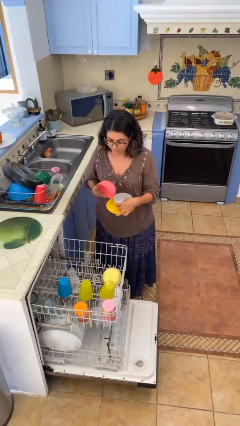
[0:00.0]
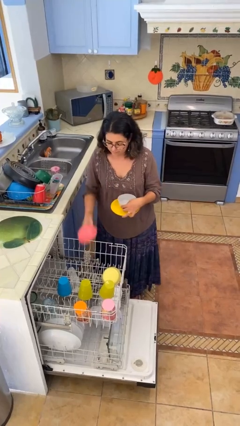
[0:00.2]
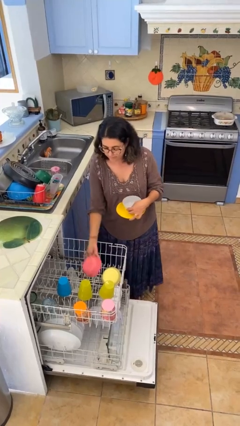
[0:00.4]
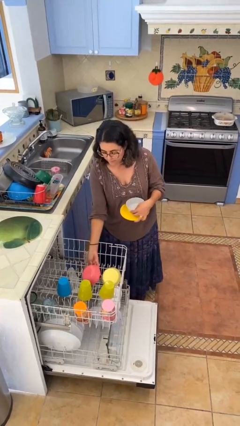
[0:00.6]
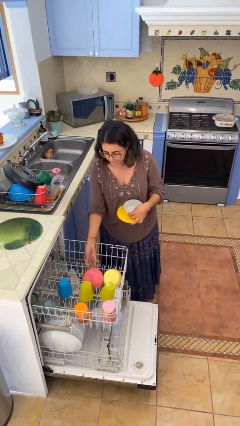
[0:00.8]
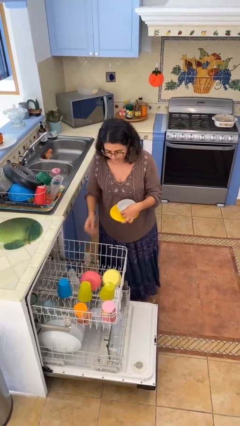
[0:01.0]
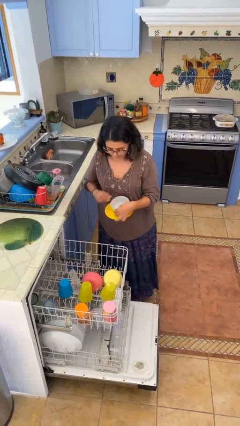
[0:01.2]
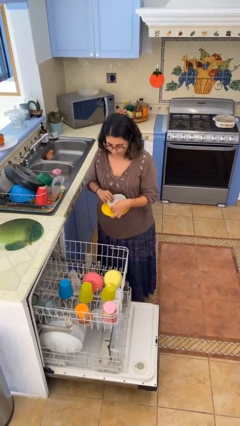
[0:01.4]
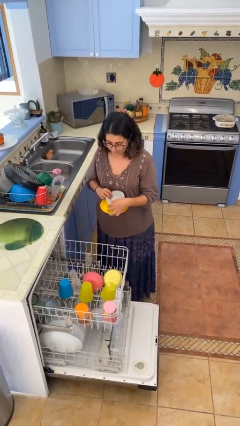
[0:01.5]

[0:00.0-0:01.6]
person loads dishwasher

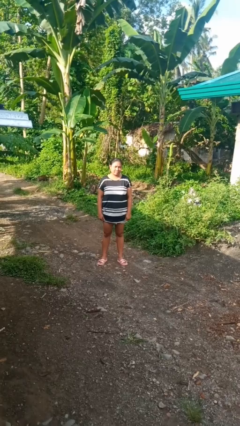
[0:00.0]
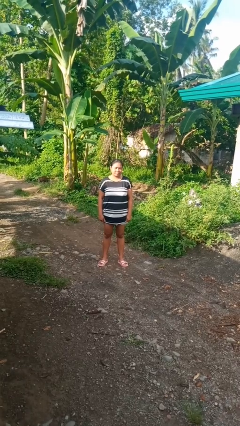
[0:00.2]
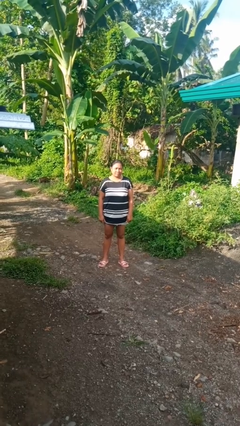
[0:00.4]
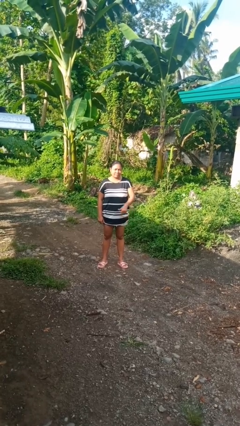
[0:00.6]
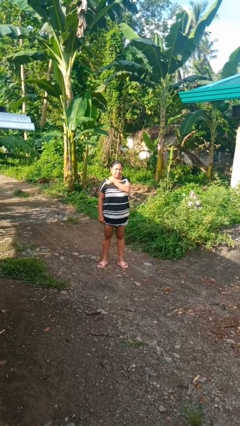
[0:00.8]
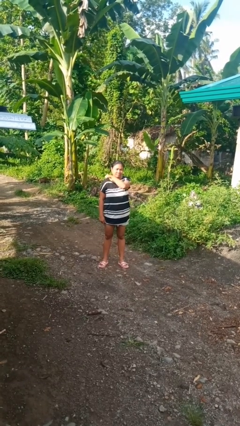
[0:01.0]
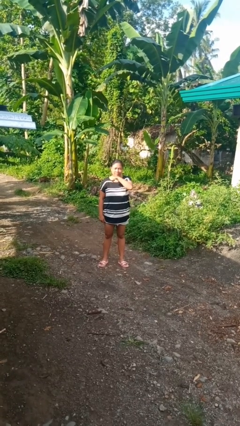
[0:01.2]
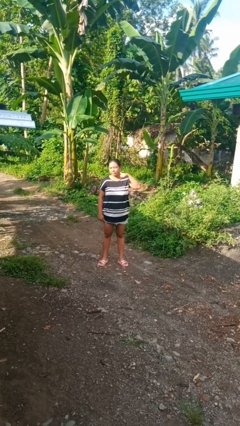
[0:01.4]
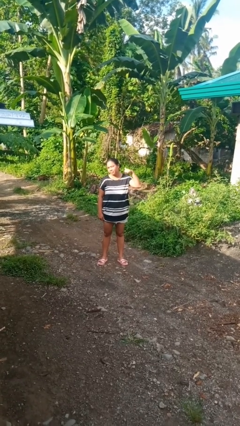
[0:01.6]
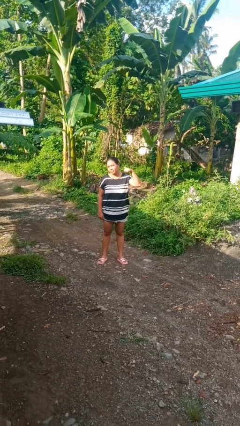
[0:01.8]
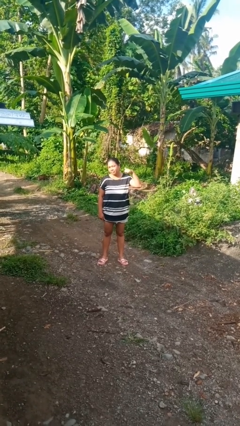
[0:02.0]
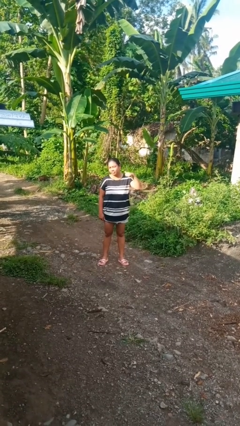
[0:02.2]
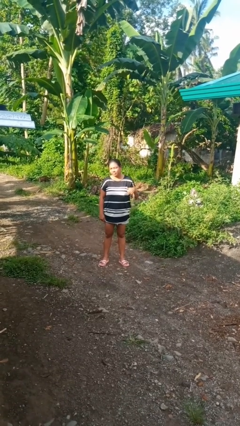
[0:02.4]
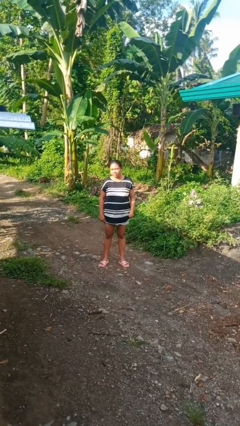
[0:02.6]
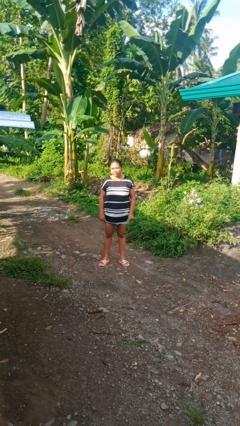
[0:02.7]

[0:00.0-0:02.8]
person gestures cut

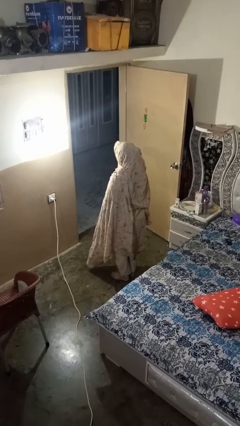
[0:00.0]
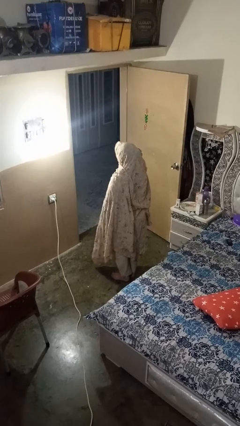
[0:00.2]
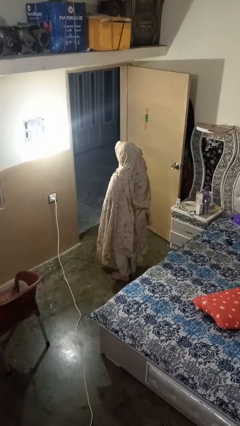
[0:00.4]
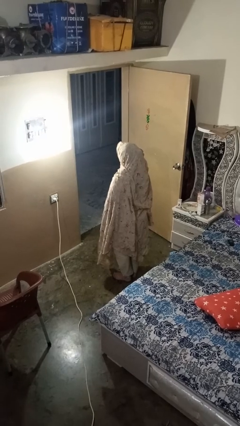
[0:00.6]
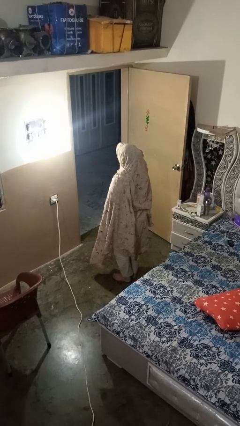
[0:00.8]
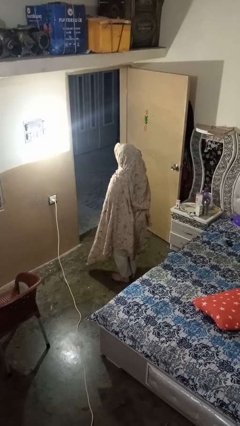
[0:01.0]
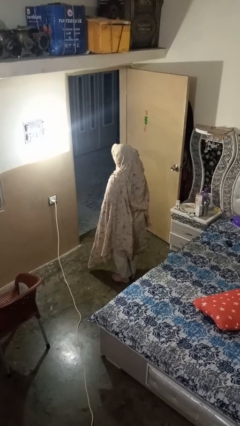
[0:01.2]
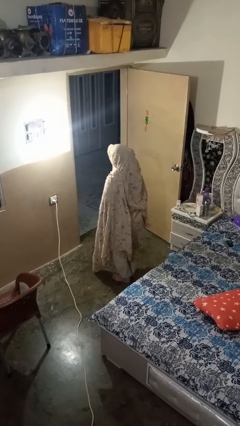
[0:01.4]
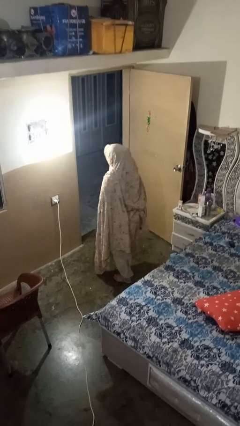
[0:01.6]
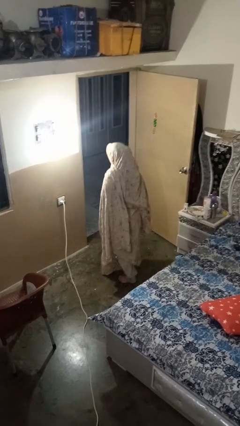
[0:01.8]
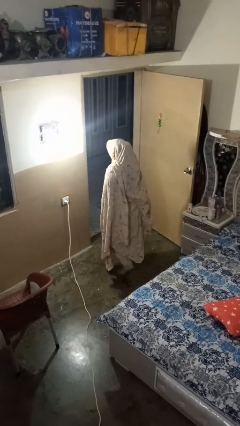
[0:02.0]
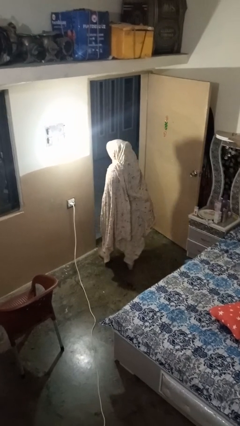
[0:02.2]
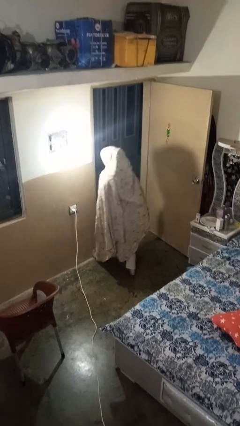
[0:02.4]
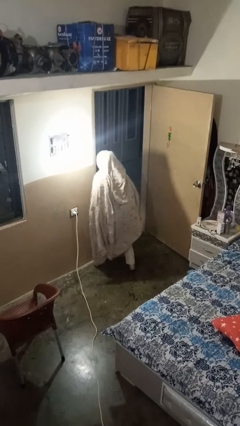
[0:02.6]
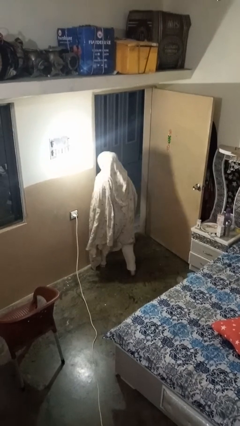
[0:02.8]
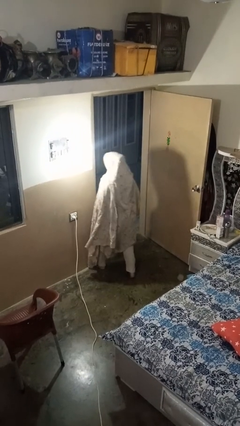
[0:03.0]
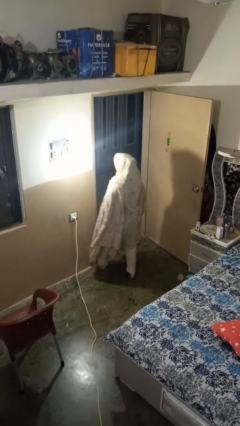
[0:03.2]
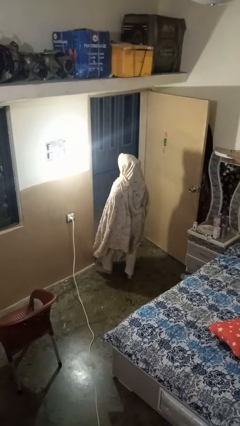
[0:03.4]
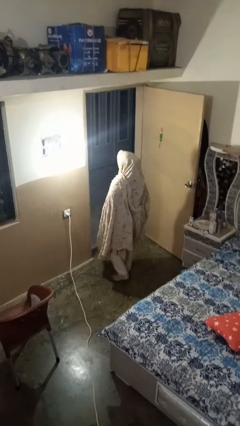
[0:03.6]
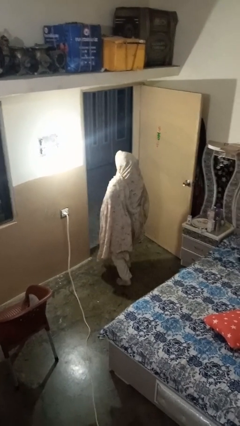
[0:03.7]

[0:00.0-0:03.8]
person bumps into wall

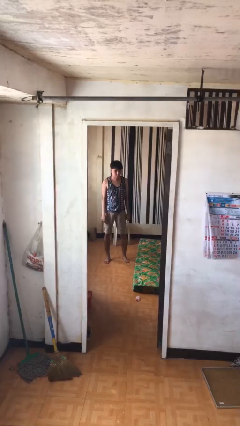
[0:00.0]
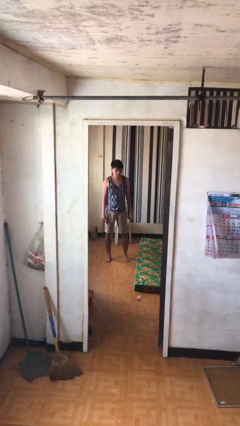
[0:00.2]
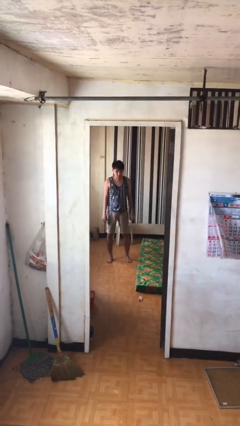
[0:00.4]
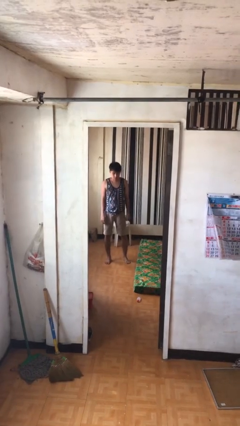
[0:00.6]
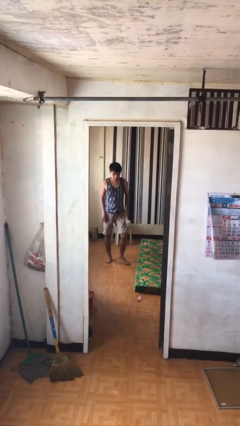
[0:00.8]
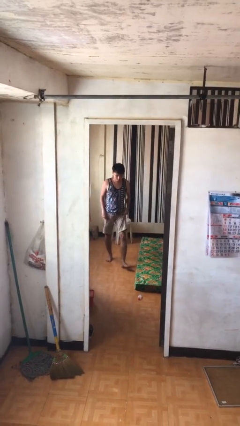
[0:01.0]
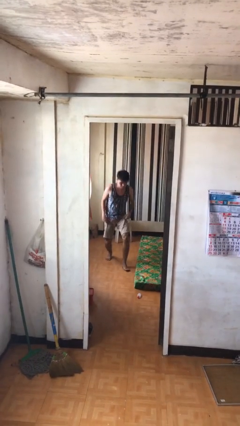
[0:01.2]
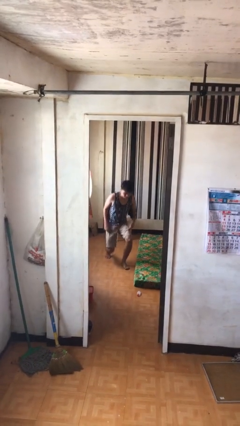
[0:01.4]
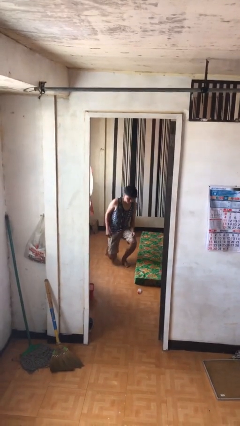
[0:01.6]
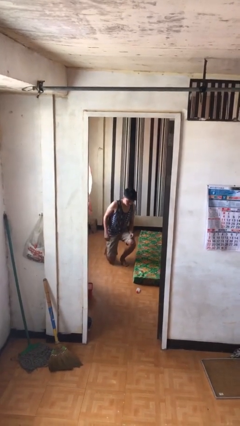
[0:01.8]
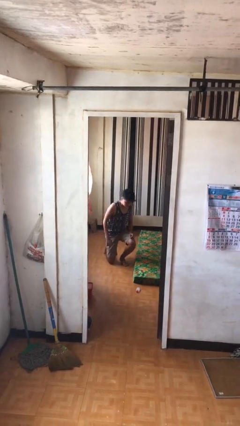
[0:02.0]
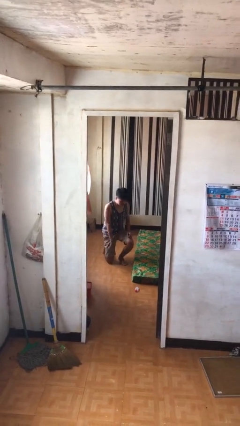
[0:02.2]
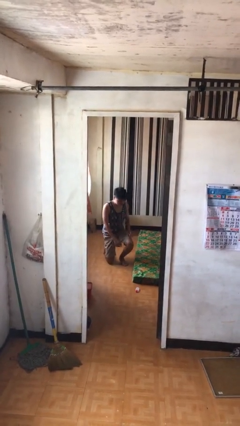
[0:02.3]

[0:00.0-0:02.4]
person kneels

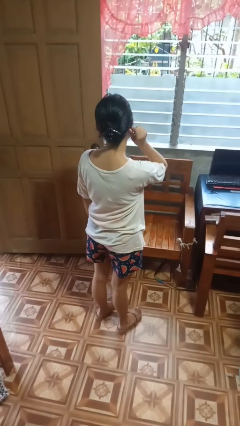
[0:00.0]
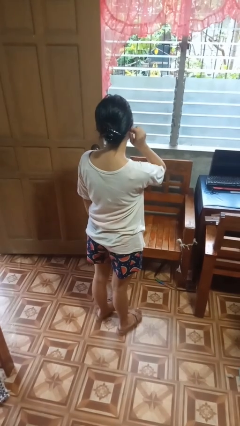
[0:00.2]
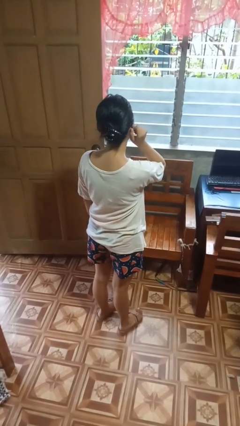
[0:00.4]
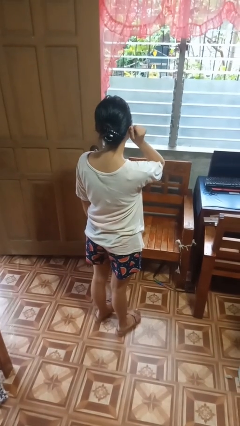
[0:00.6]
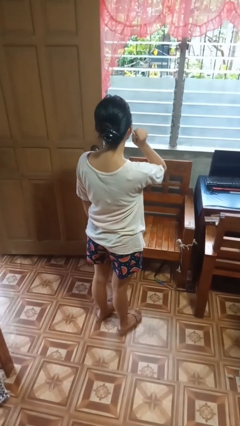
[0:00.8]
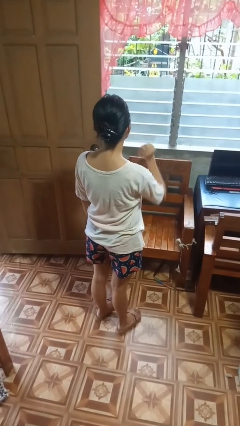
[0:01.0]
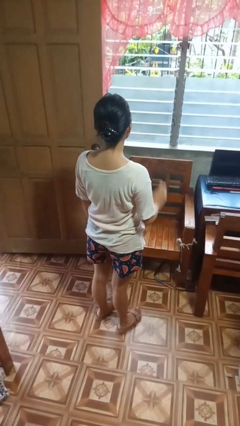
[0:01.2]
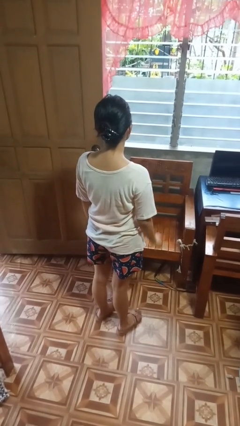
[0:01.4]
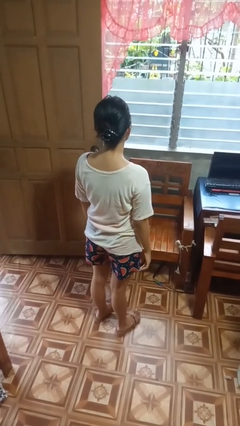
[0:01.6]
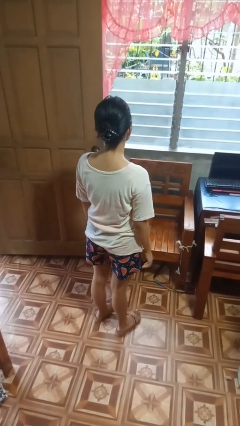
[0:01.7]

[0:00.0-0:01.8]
person touches earlobe

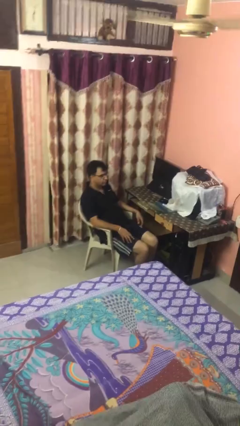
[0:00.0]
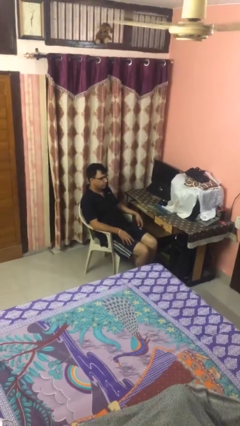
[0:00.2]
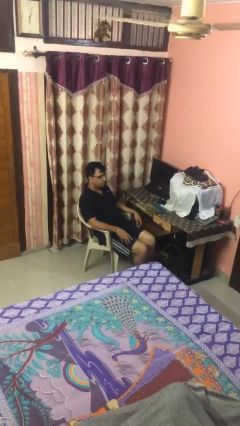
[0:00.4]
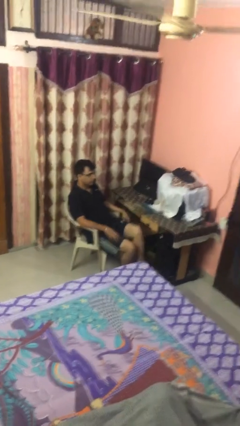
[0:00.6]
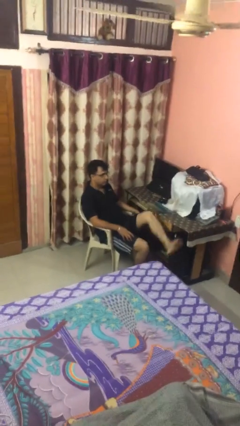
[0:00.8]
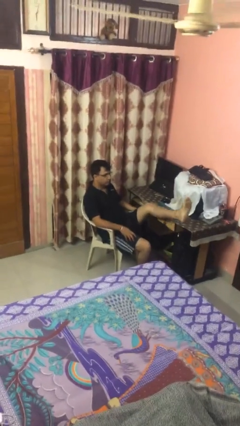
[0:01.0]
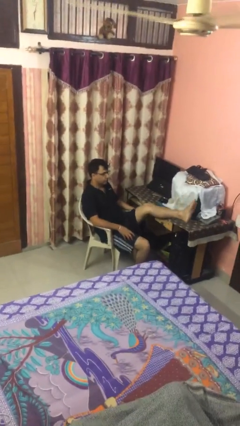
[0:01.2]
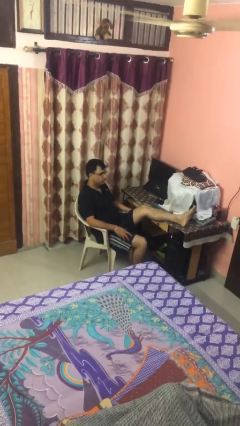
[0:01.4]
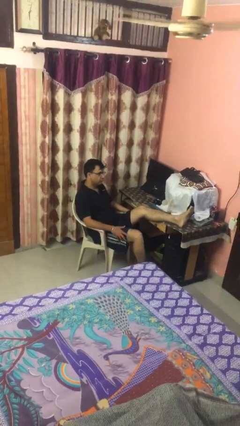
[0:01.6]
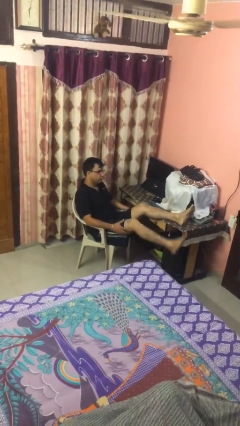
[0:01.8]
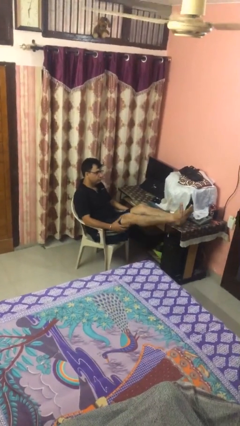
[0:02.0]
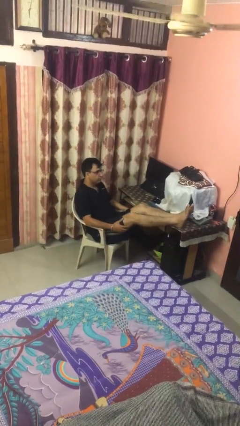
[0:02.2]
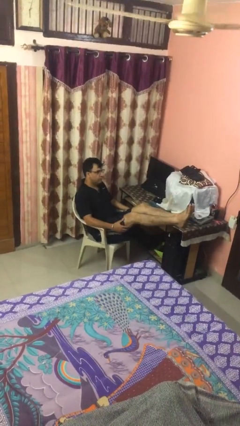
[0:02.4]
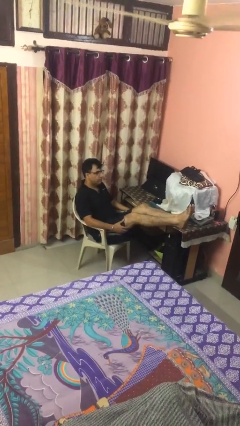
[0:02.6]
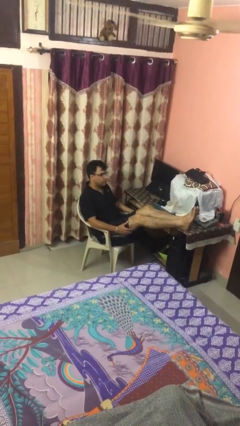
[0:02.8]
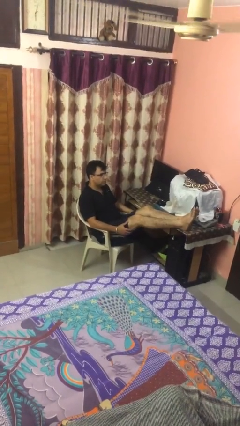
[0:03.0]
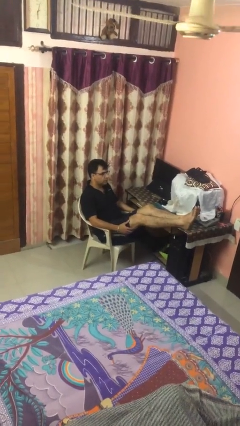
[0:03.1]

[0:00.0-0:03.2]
person puts feet up

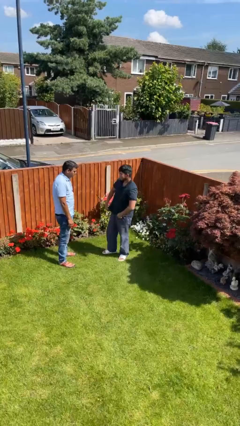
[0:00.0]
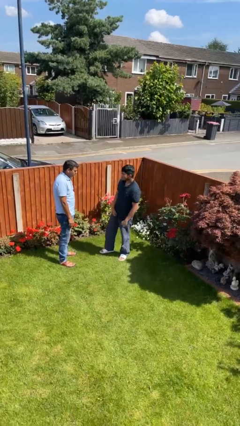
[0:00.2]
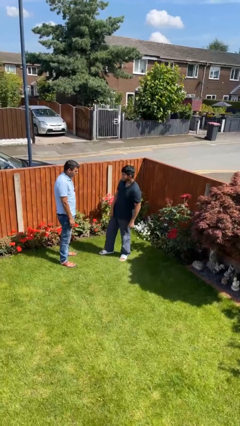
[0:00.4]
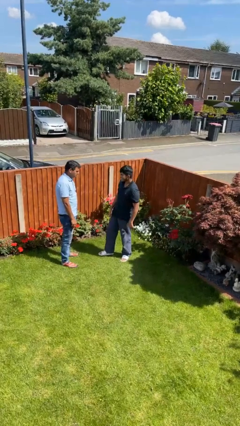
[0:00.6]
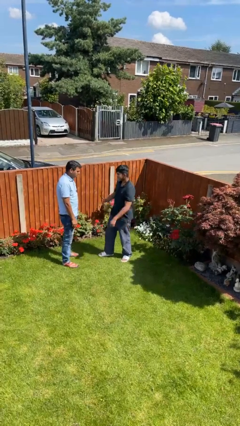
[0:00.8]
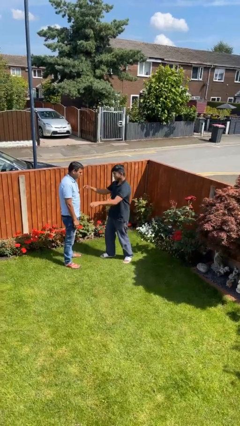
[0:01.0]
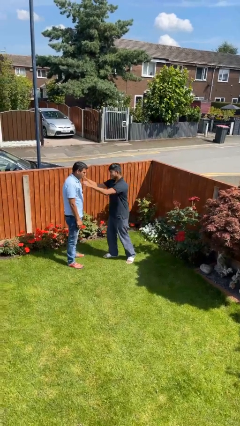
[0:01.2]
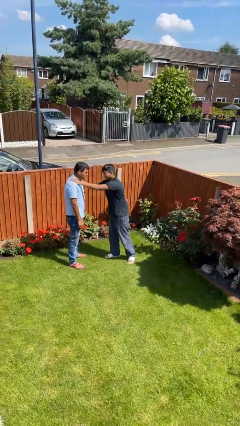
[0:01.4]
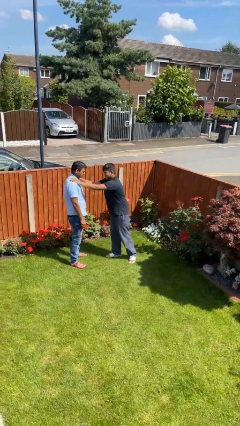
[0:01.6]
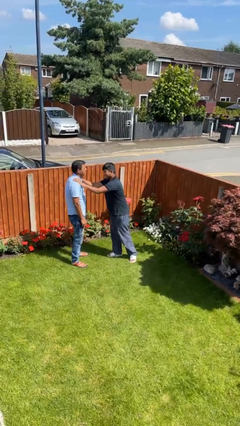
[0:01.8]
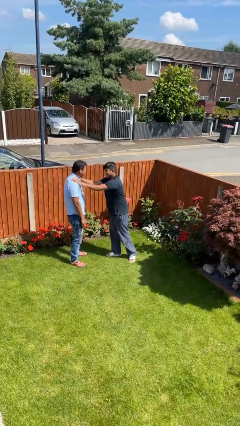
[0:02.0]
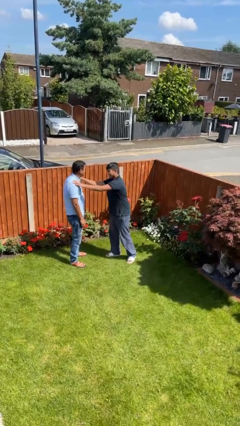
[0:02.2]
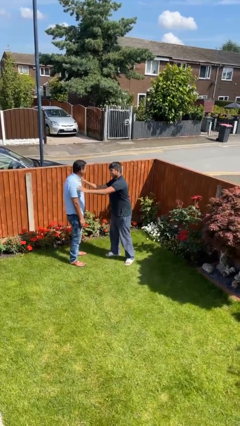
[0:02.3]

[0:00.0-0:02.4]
person pounds shoulders of person
